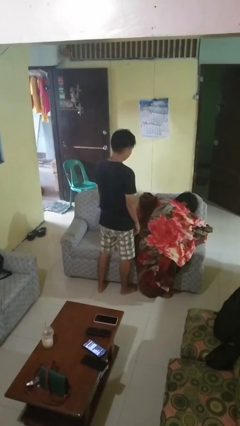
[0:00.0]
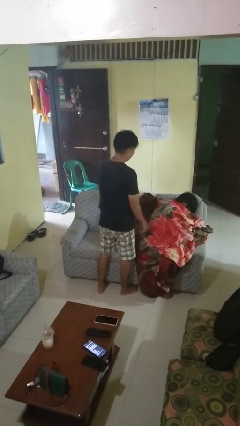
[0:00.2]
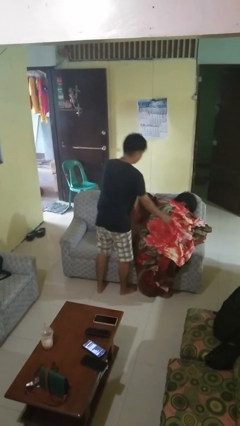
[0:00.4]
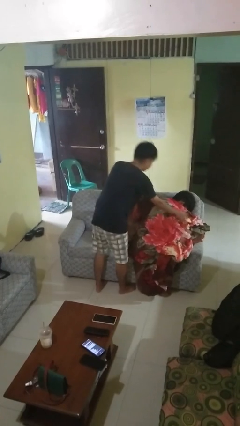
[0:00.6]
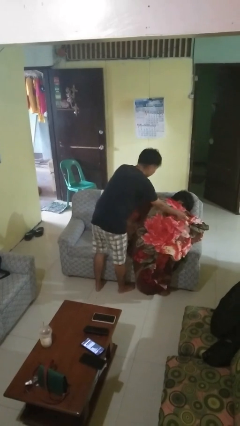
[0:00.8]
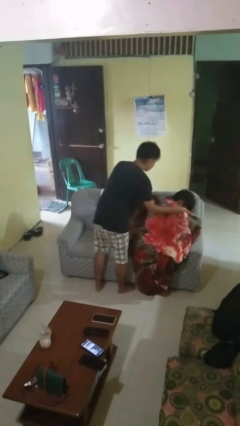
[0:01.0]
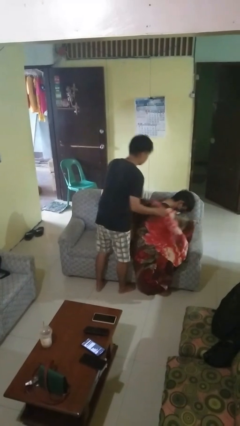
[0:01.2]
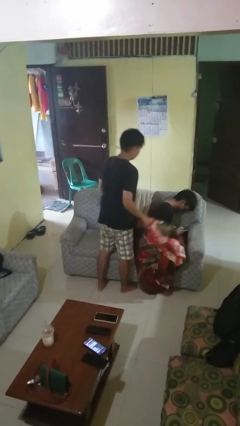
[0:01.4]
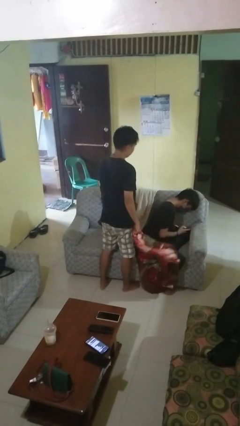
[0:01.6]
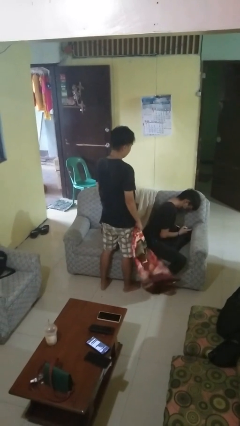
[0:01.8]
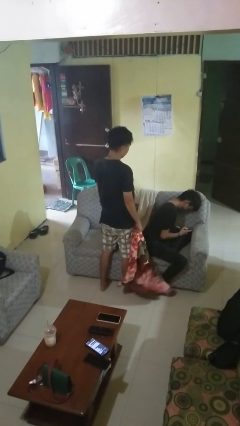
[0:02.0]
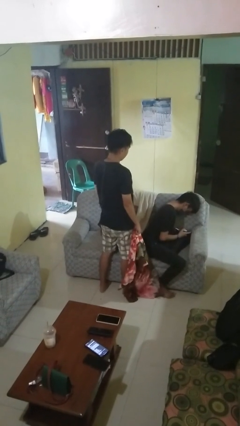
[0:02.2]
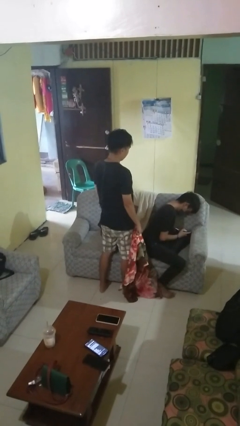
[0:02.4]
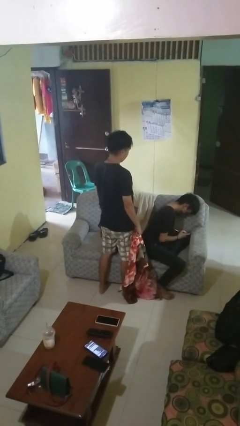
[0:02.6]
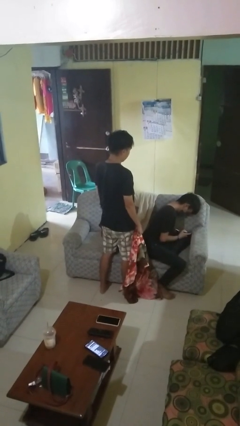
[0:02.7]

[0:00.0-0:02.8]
person uncovers friend with blanket

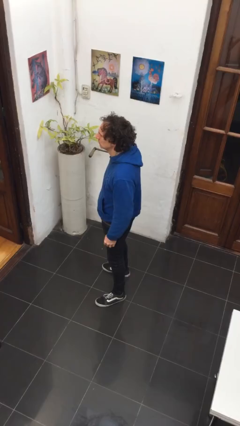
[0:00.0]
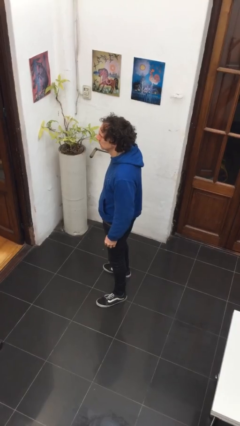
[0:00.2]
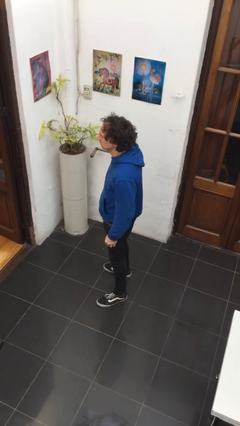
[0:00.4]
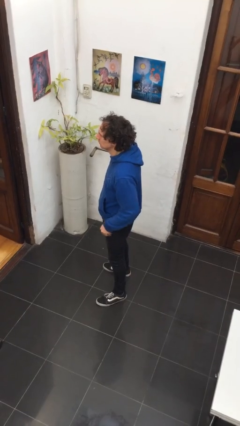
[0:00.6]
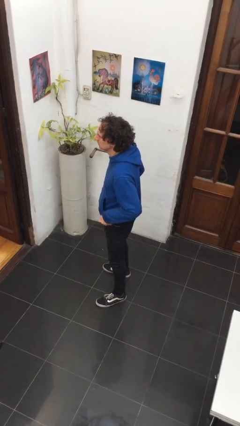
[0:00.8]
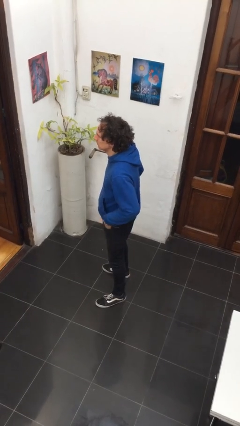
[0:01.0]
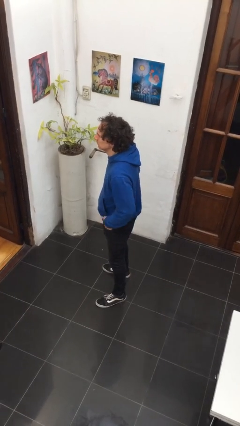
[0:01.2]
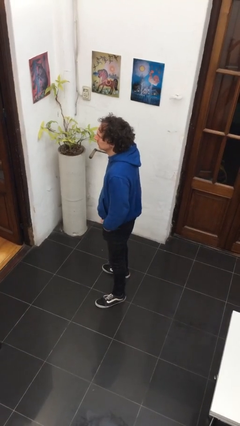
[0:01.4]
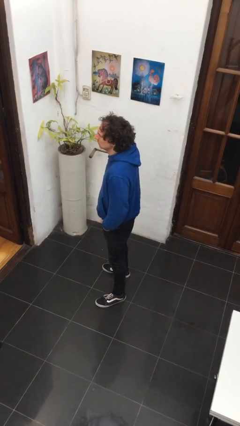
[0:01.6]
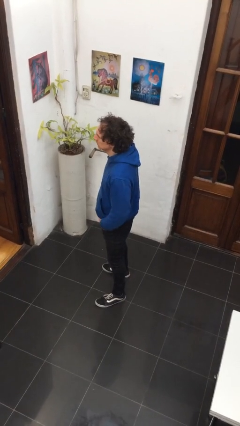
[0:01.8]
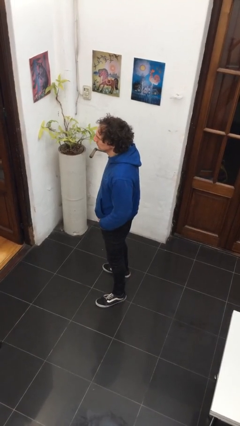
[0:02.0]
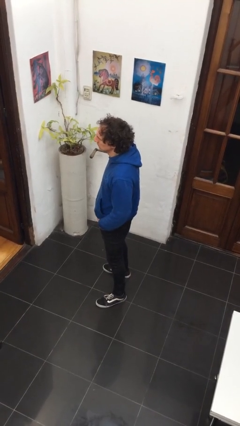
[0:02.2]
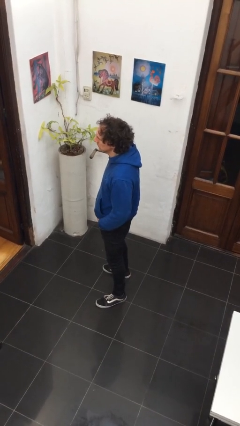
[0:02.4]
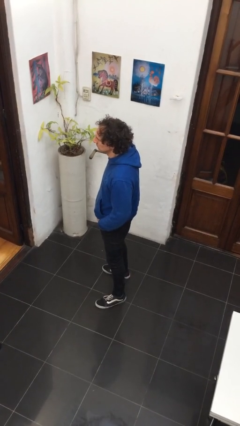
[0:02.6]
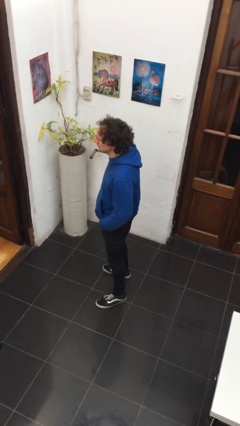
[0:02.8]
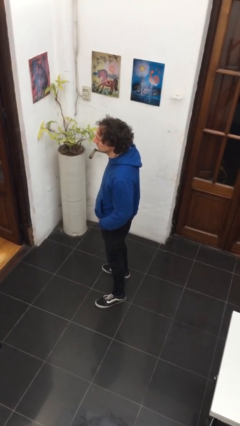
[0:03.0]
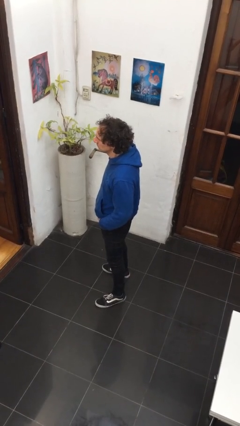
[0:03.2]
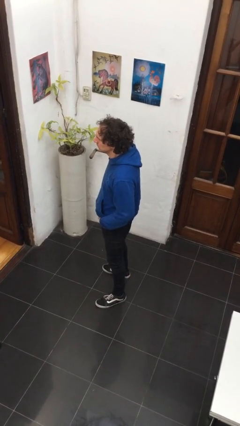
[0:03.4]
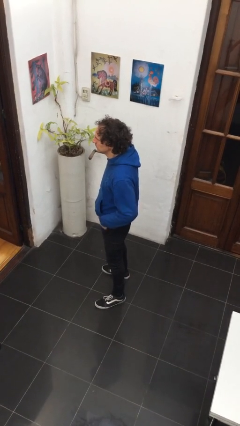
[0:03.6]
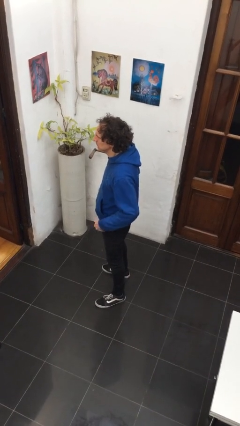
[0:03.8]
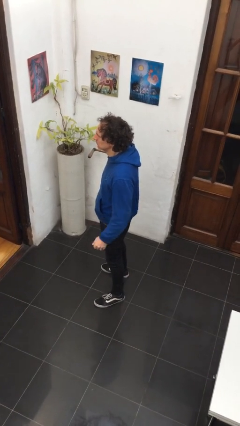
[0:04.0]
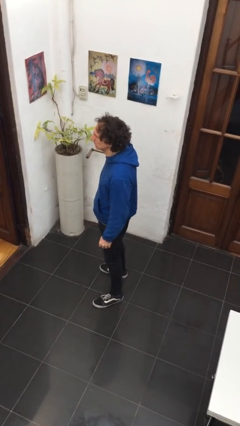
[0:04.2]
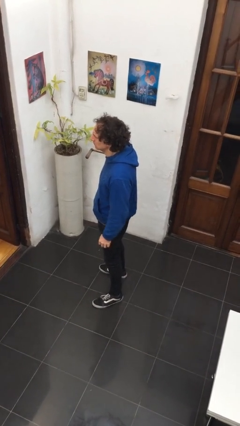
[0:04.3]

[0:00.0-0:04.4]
person puts hands in back pockets

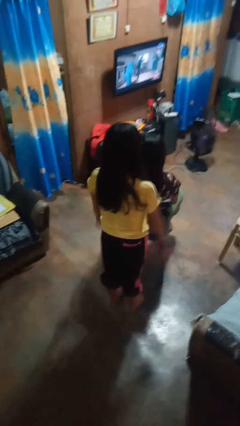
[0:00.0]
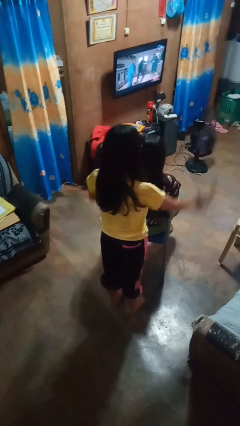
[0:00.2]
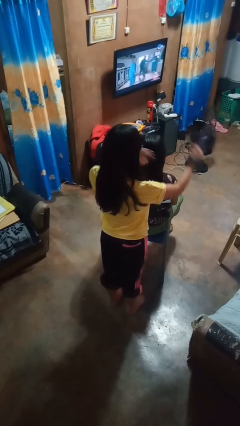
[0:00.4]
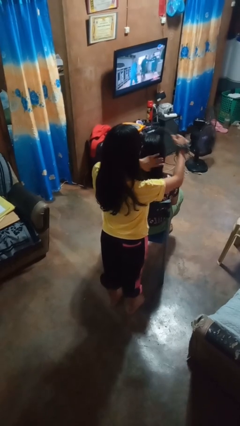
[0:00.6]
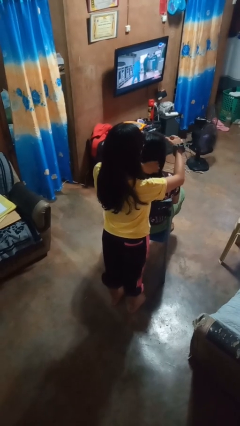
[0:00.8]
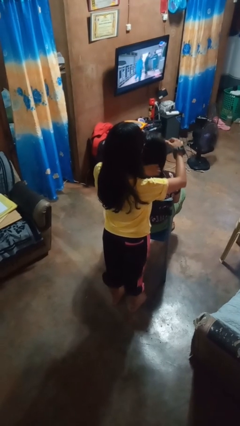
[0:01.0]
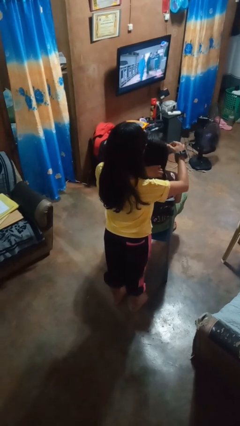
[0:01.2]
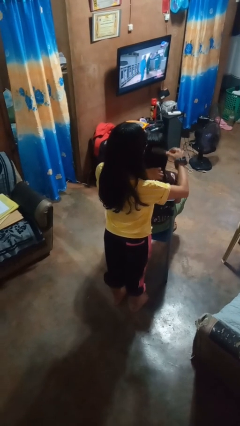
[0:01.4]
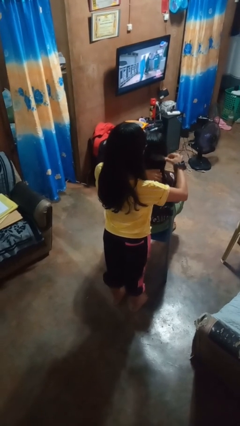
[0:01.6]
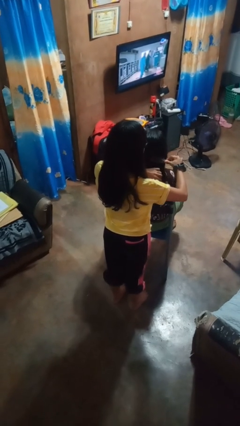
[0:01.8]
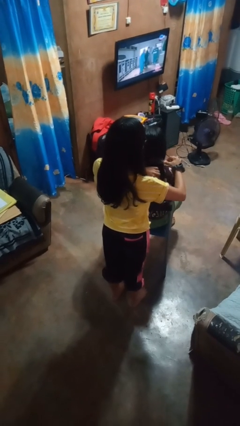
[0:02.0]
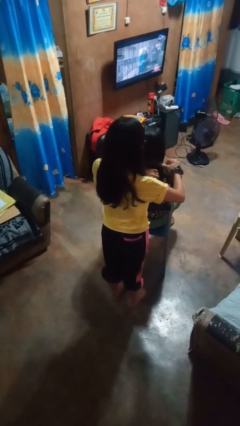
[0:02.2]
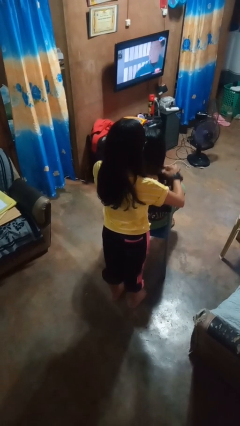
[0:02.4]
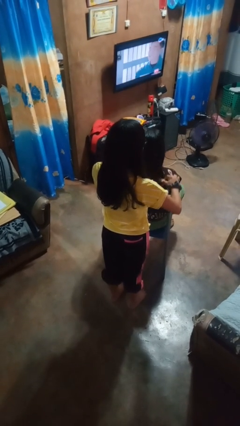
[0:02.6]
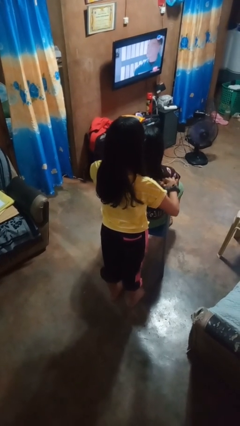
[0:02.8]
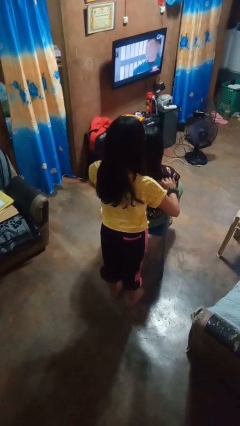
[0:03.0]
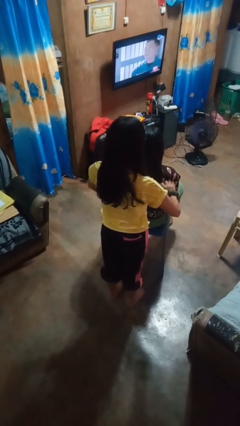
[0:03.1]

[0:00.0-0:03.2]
person brushes hair of person

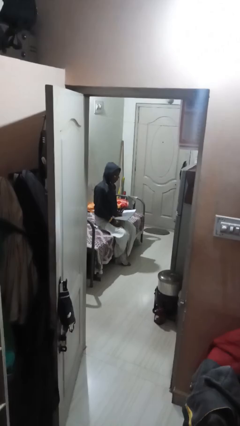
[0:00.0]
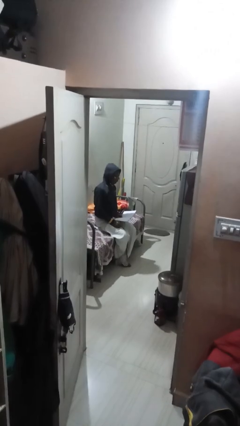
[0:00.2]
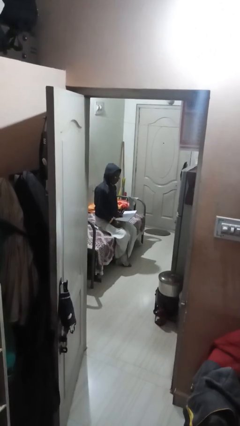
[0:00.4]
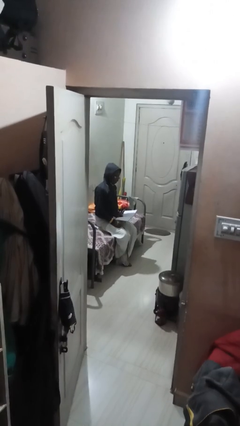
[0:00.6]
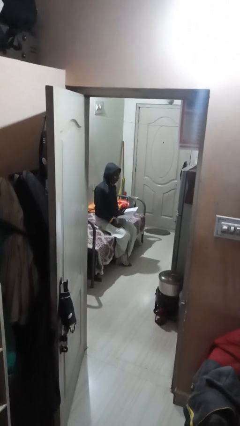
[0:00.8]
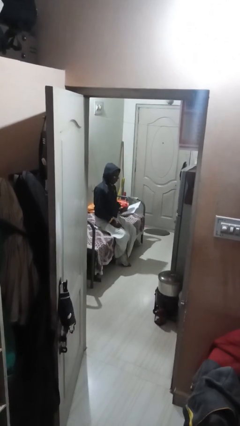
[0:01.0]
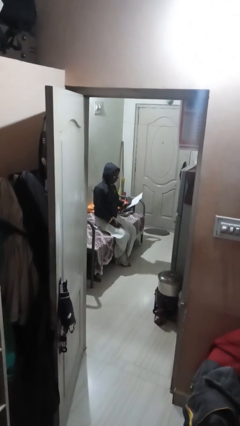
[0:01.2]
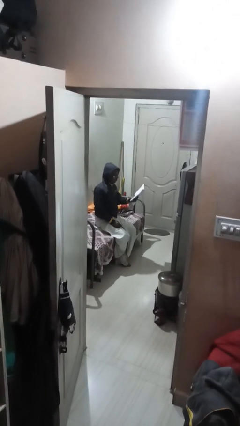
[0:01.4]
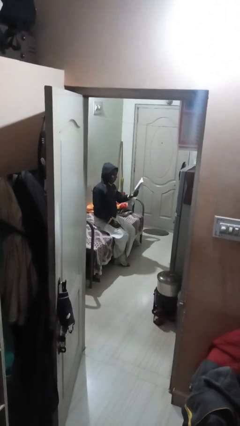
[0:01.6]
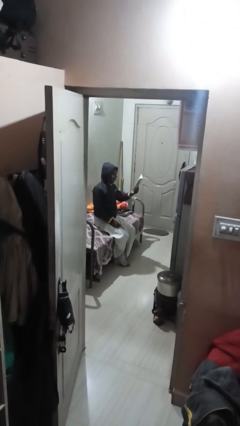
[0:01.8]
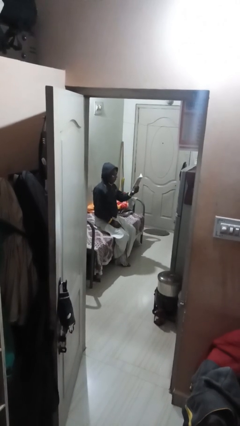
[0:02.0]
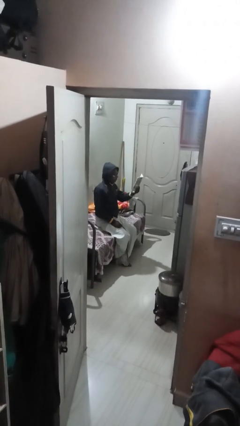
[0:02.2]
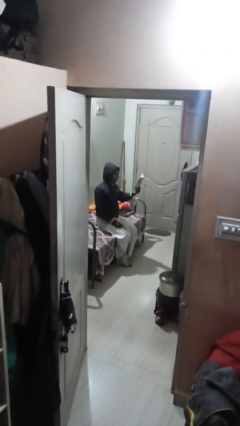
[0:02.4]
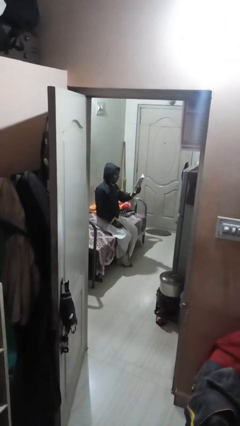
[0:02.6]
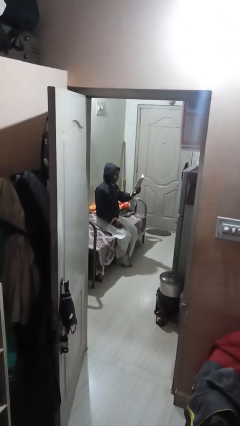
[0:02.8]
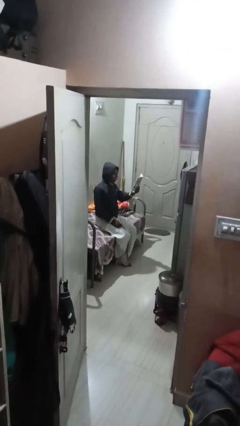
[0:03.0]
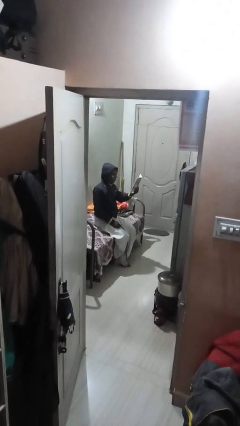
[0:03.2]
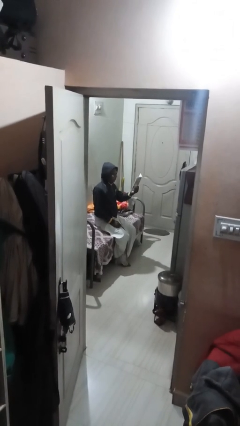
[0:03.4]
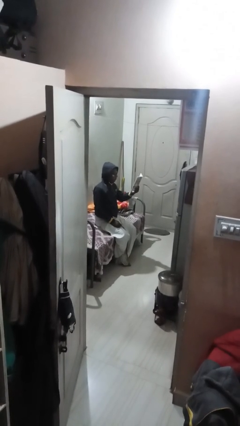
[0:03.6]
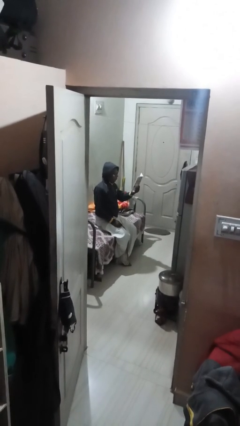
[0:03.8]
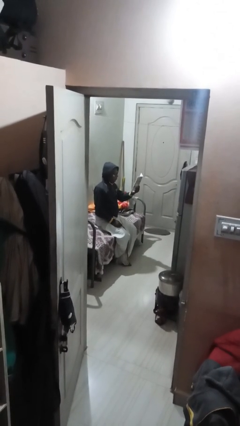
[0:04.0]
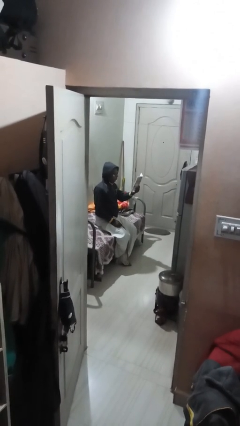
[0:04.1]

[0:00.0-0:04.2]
person reads document

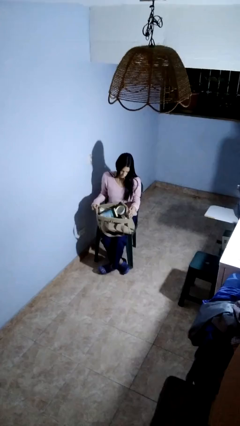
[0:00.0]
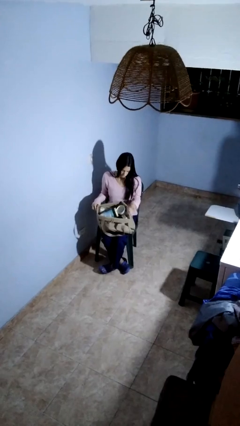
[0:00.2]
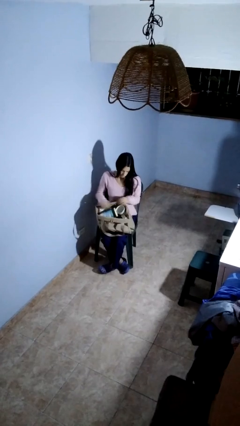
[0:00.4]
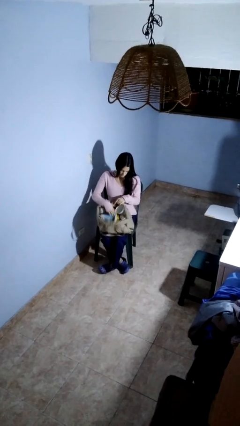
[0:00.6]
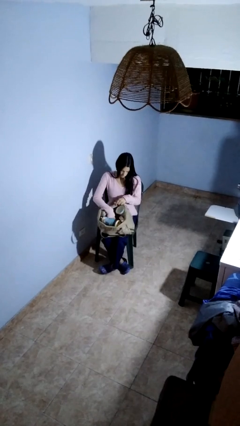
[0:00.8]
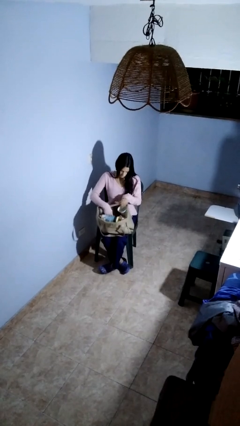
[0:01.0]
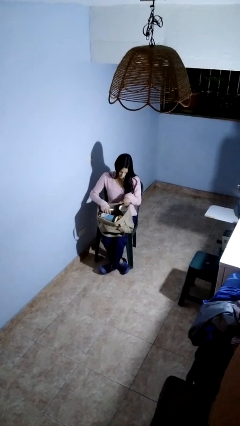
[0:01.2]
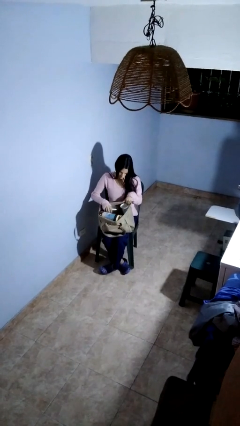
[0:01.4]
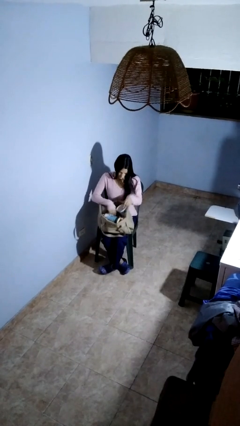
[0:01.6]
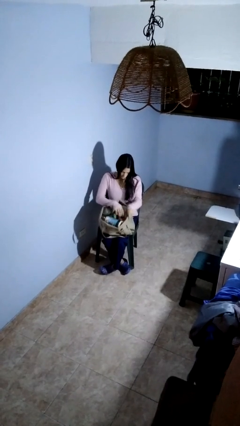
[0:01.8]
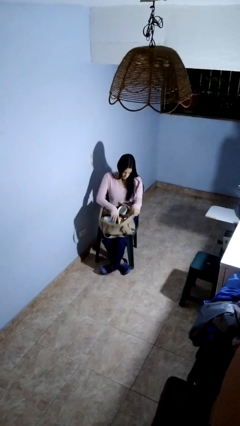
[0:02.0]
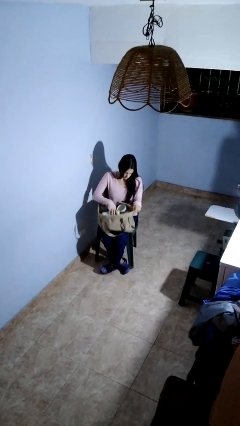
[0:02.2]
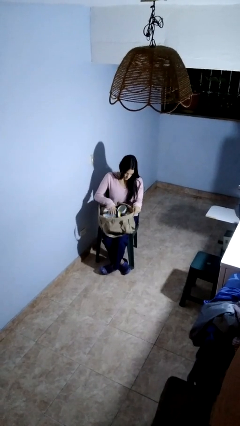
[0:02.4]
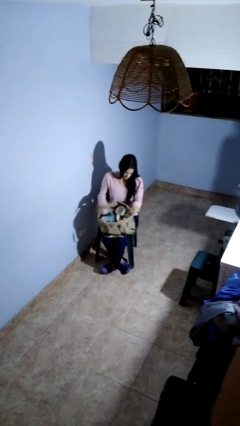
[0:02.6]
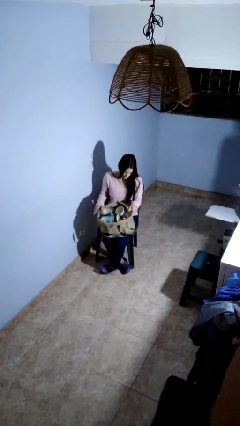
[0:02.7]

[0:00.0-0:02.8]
person searches in bag
